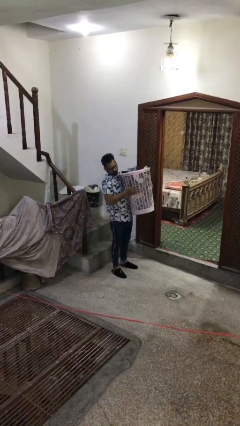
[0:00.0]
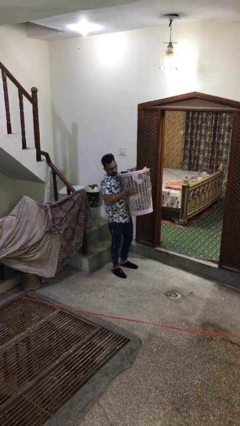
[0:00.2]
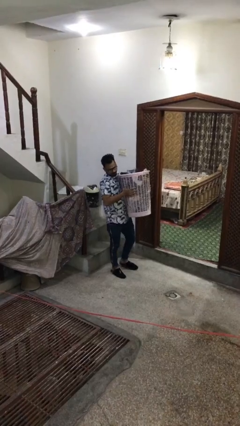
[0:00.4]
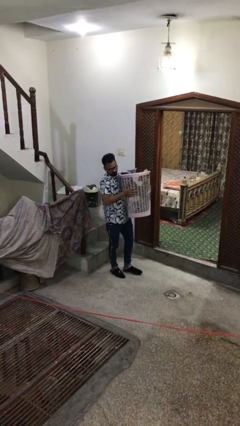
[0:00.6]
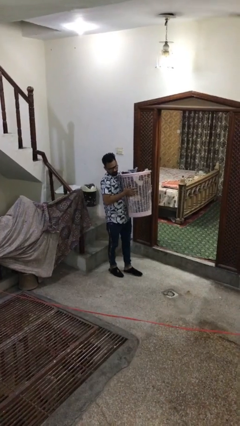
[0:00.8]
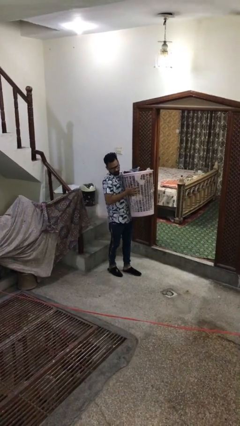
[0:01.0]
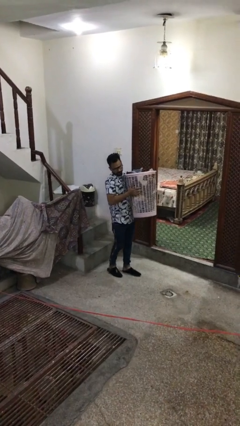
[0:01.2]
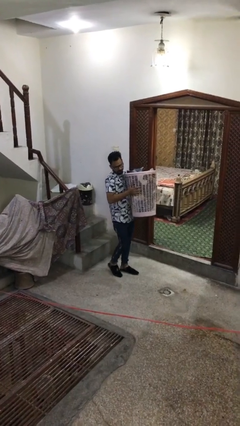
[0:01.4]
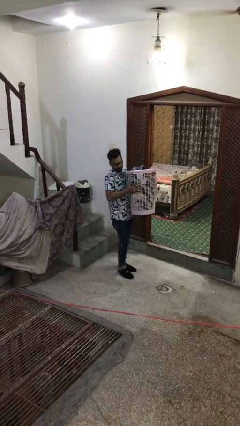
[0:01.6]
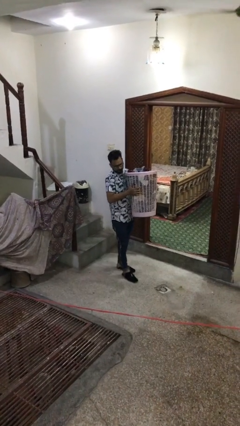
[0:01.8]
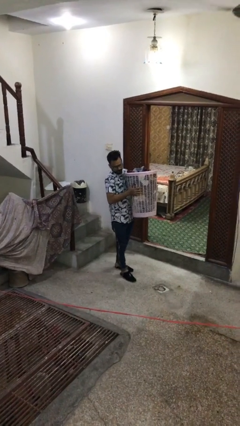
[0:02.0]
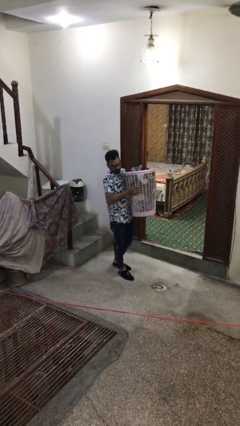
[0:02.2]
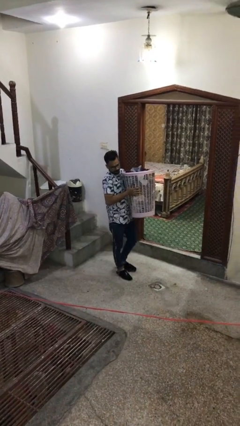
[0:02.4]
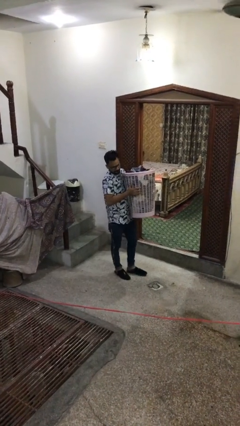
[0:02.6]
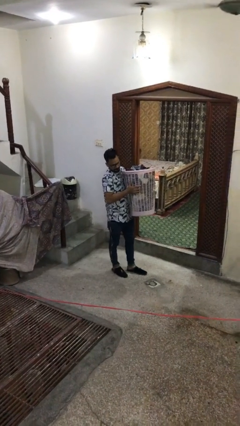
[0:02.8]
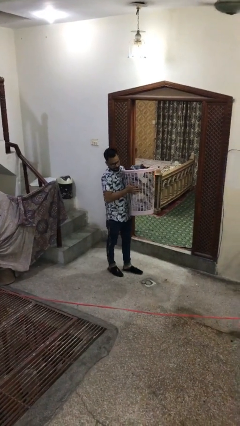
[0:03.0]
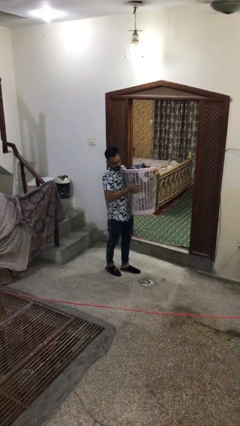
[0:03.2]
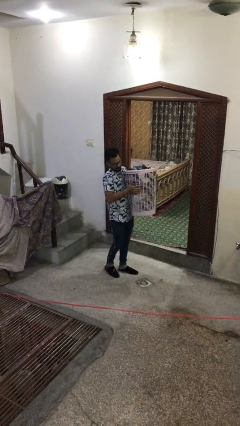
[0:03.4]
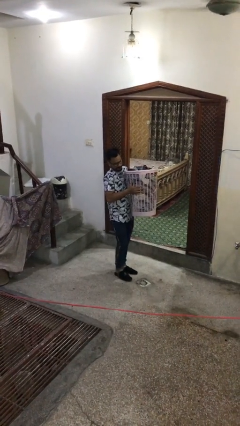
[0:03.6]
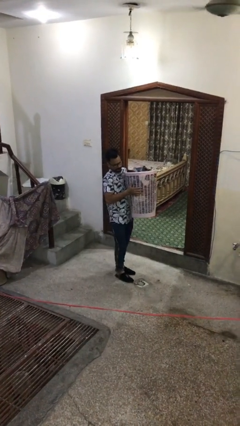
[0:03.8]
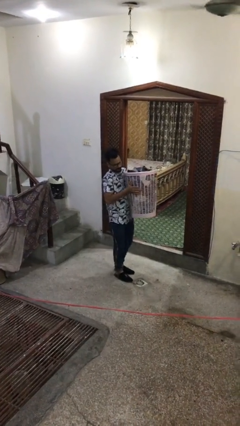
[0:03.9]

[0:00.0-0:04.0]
person carries heavy object

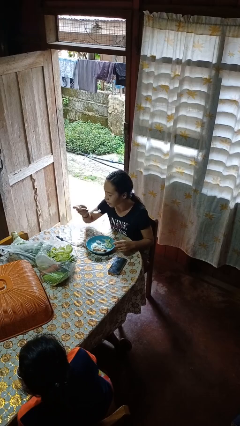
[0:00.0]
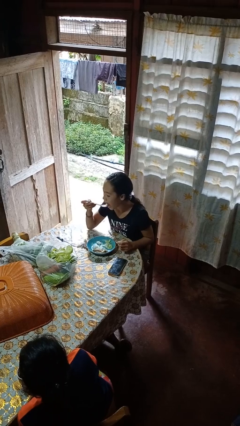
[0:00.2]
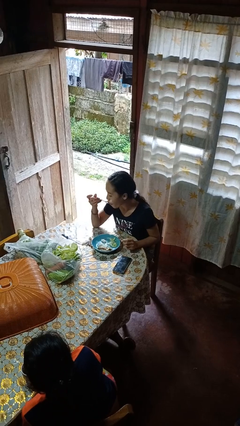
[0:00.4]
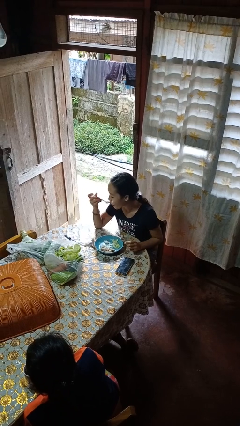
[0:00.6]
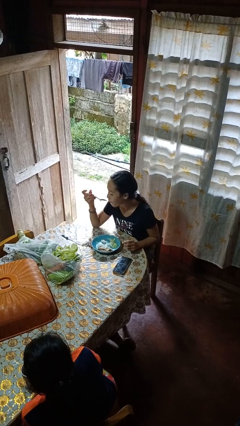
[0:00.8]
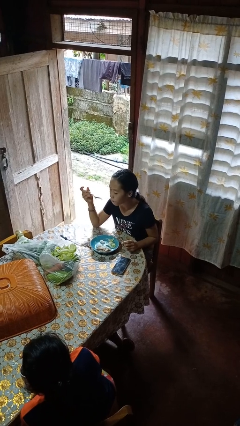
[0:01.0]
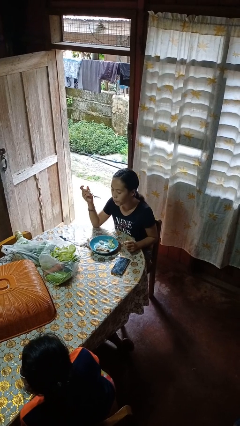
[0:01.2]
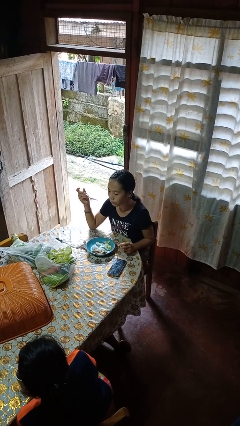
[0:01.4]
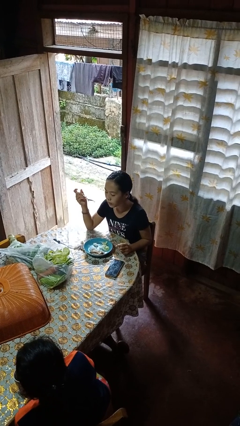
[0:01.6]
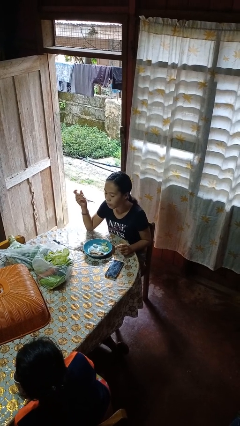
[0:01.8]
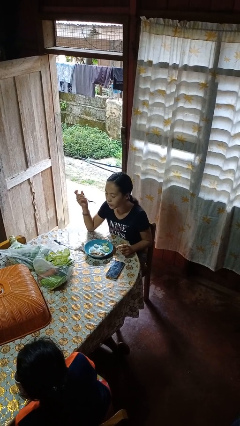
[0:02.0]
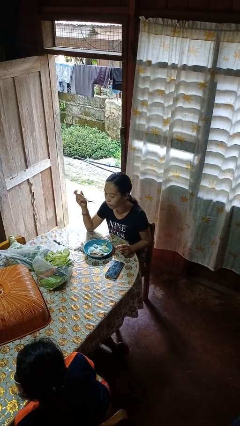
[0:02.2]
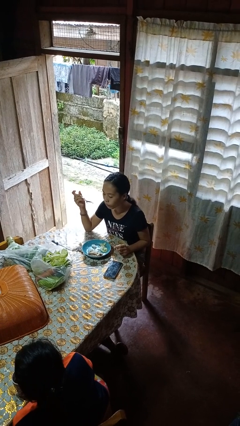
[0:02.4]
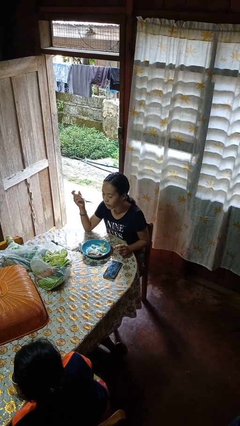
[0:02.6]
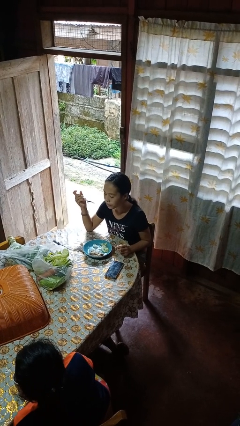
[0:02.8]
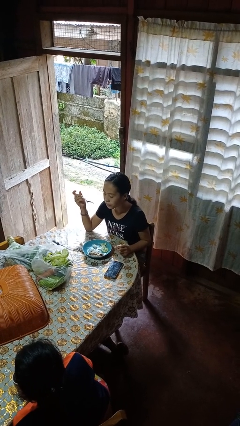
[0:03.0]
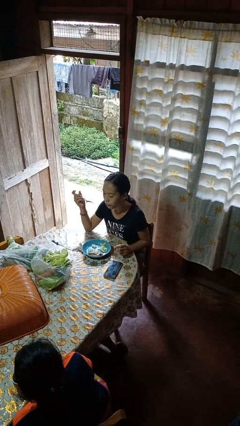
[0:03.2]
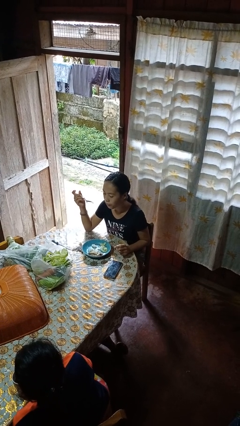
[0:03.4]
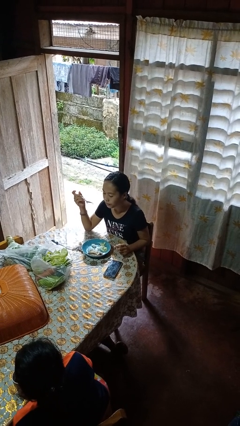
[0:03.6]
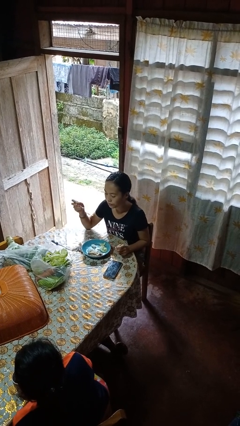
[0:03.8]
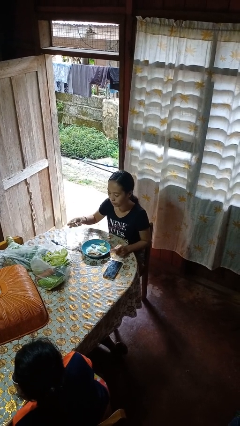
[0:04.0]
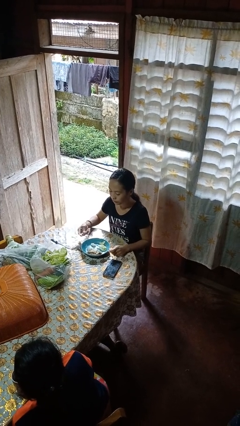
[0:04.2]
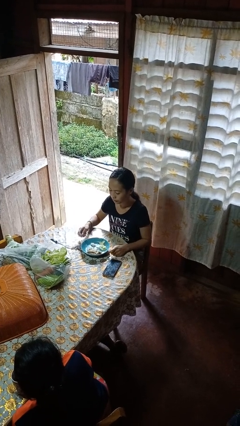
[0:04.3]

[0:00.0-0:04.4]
person eats with utensil

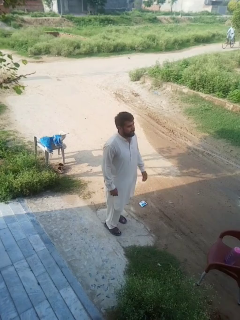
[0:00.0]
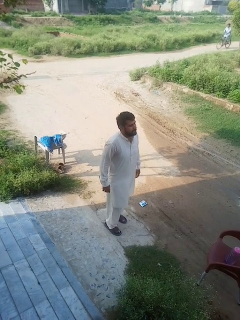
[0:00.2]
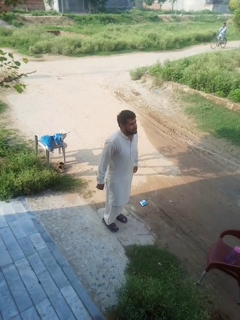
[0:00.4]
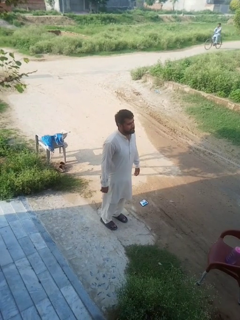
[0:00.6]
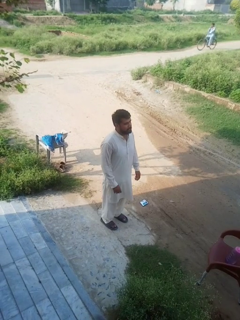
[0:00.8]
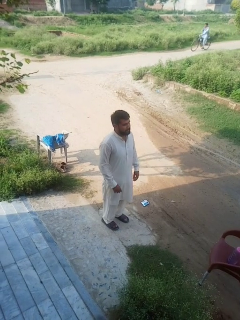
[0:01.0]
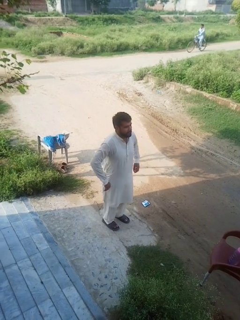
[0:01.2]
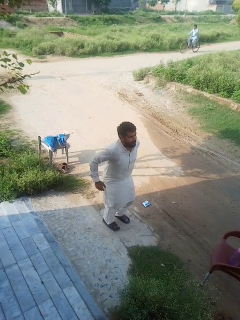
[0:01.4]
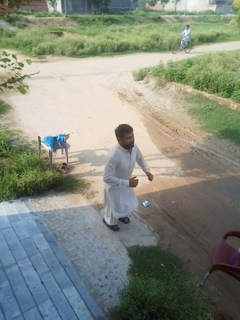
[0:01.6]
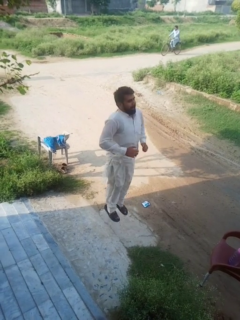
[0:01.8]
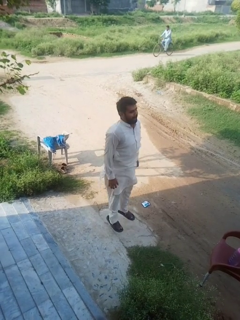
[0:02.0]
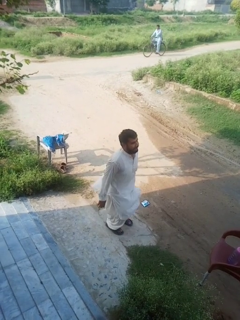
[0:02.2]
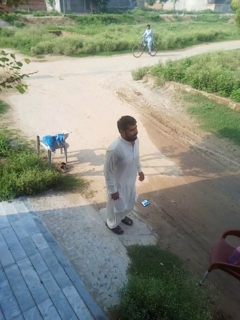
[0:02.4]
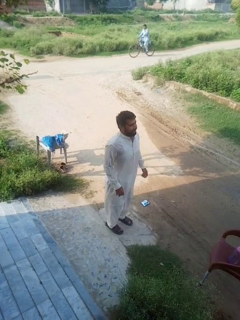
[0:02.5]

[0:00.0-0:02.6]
person jumps

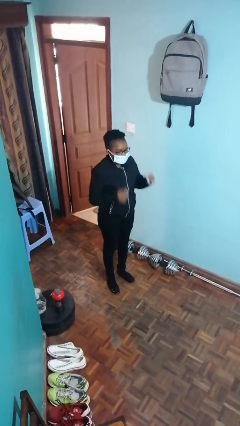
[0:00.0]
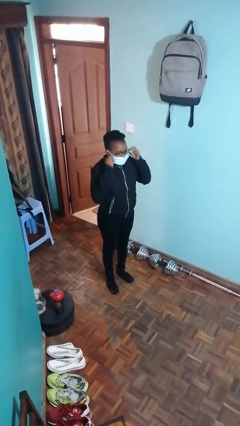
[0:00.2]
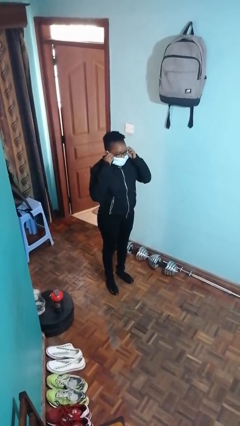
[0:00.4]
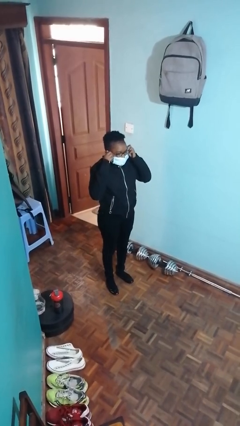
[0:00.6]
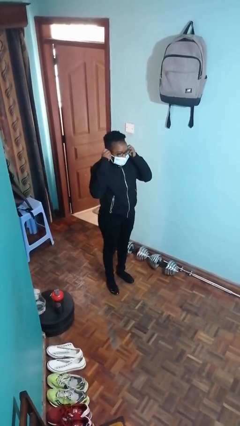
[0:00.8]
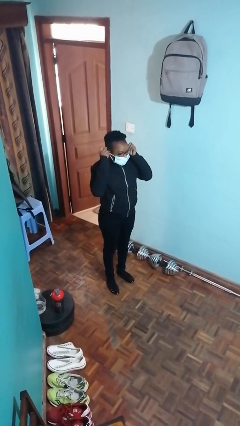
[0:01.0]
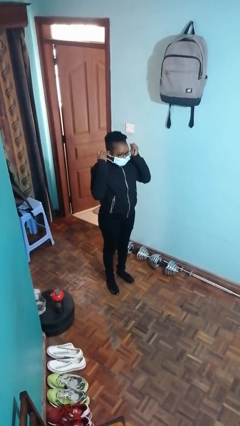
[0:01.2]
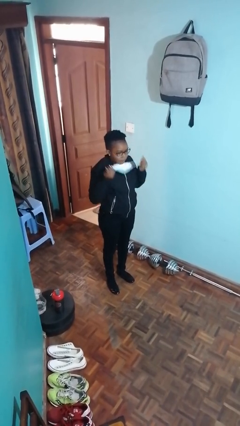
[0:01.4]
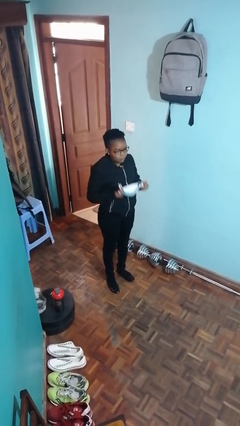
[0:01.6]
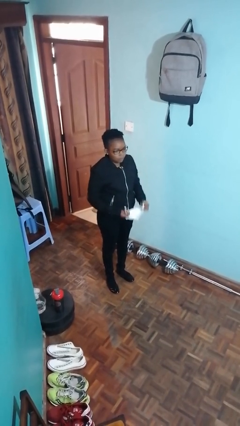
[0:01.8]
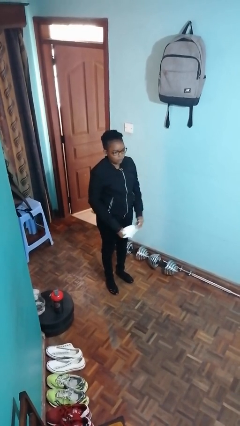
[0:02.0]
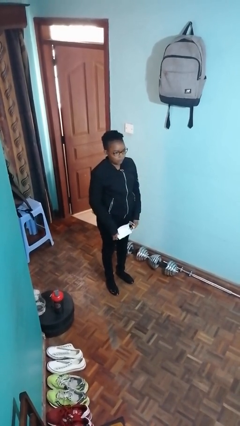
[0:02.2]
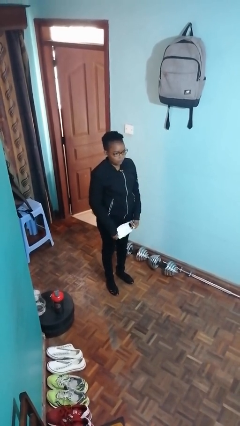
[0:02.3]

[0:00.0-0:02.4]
person takes off facemask

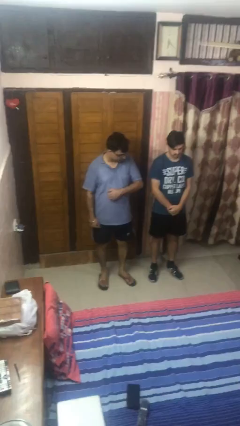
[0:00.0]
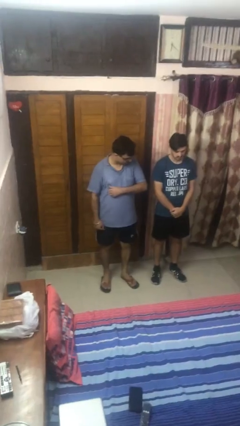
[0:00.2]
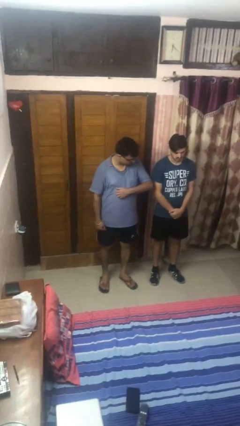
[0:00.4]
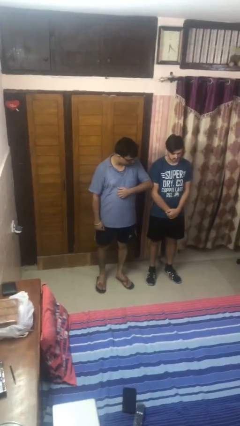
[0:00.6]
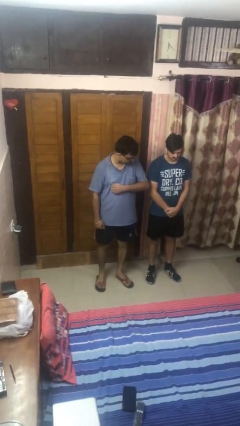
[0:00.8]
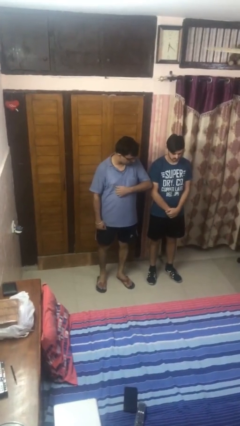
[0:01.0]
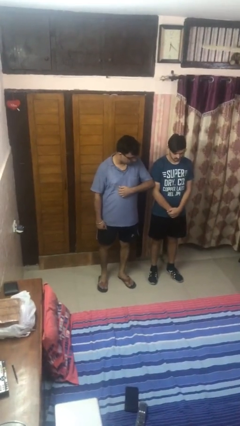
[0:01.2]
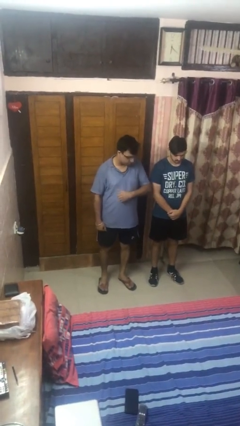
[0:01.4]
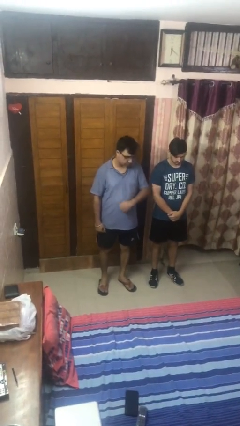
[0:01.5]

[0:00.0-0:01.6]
person nudges person with elbow

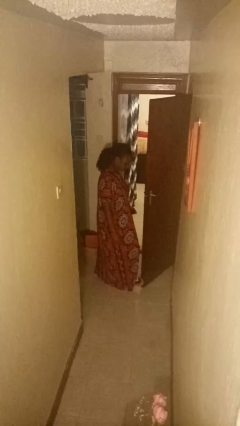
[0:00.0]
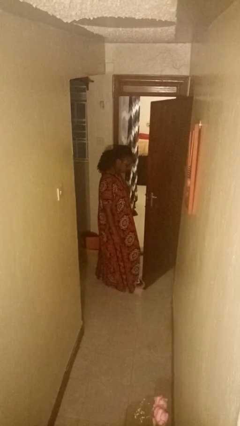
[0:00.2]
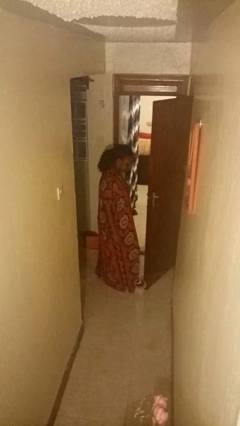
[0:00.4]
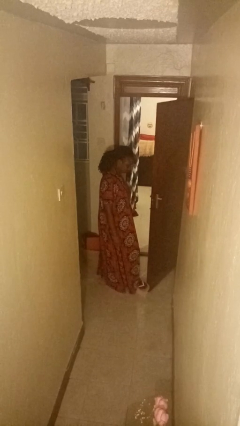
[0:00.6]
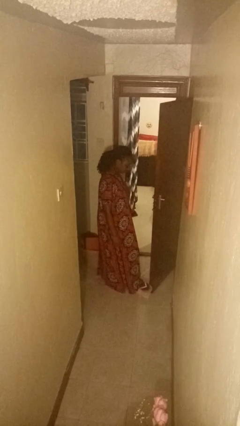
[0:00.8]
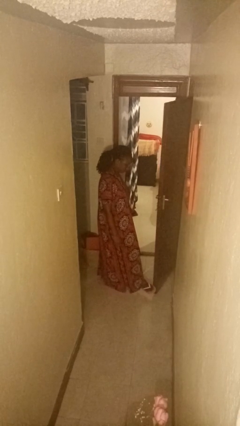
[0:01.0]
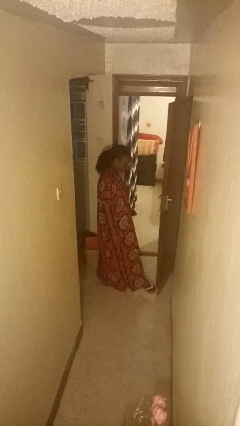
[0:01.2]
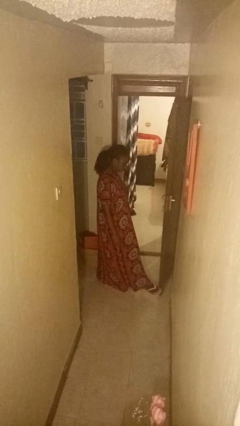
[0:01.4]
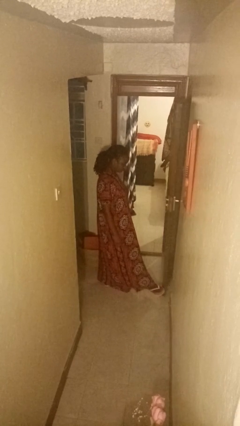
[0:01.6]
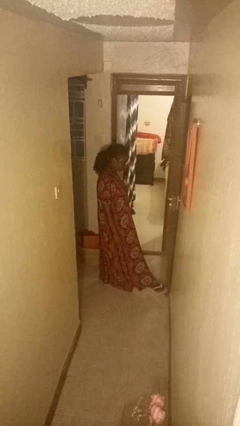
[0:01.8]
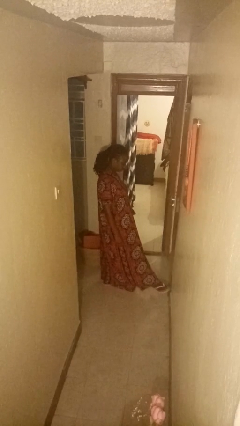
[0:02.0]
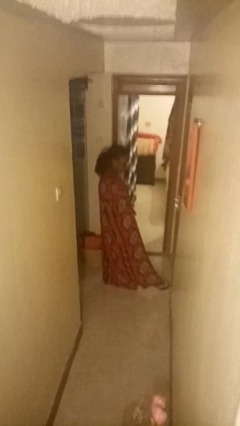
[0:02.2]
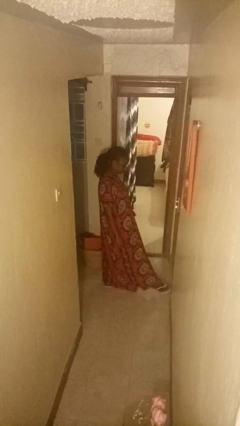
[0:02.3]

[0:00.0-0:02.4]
person closes door with foot

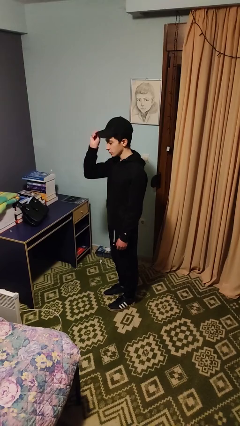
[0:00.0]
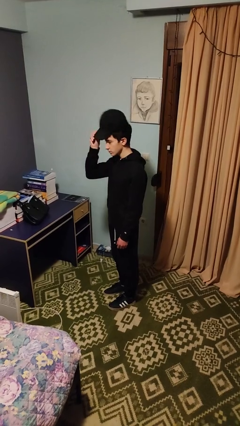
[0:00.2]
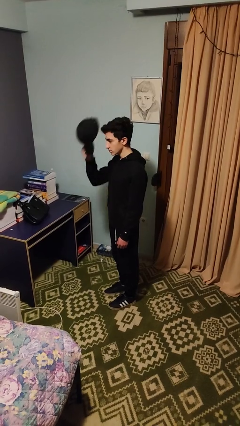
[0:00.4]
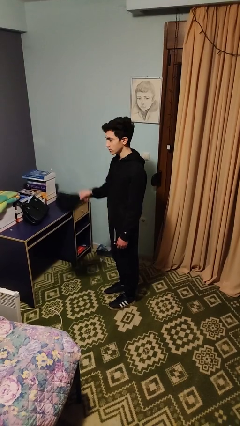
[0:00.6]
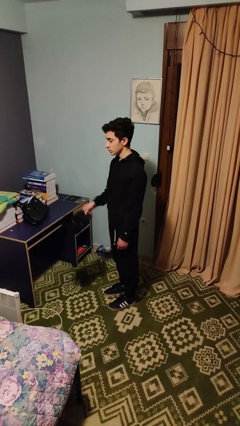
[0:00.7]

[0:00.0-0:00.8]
person takes off hat
